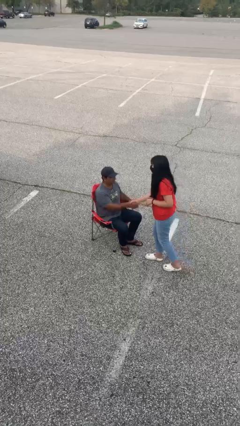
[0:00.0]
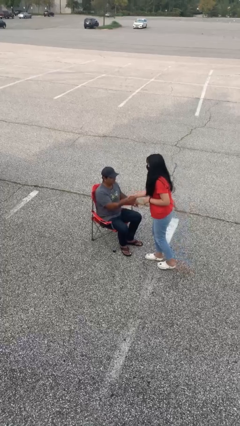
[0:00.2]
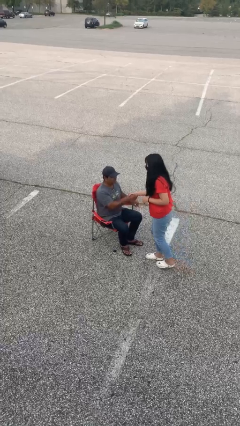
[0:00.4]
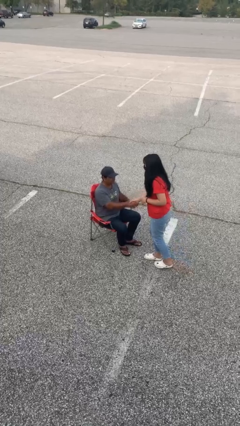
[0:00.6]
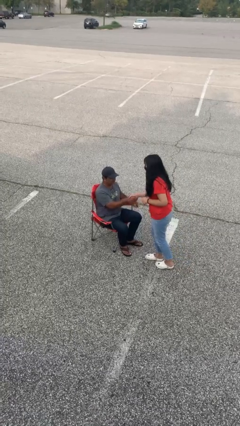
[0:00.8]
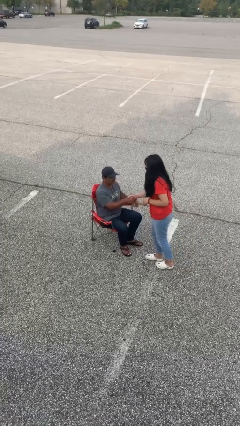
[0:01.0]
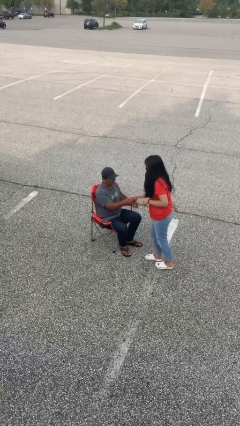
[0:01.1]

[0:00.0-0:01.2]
person shakes hand

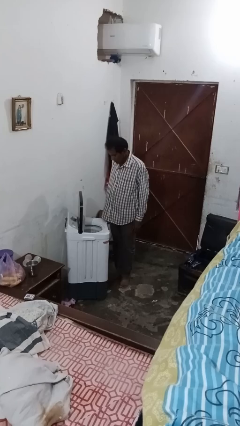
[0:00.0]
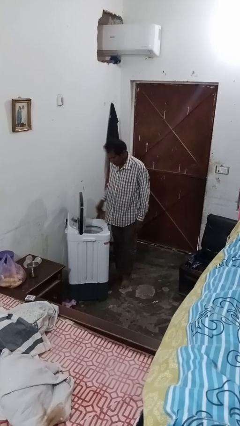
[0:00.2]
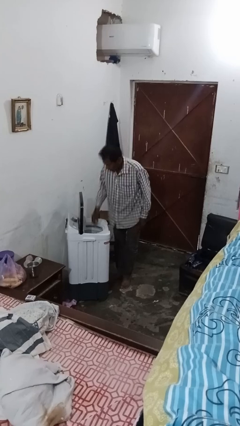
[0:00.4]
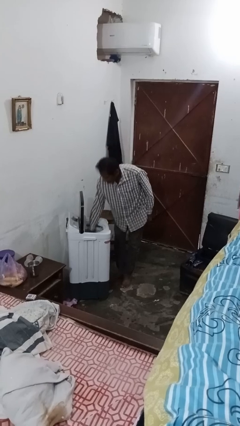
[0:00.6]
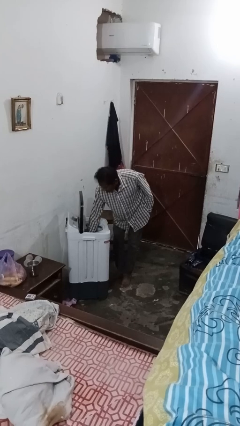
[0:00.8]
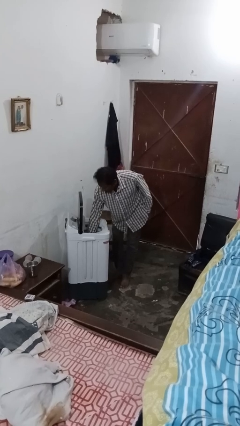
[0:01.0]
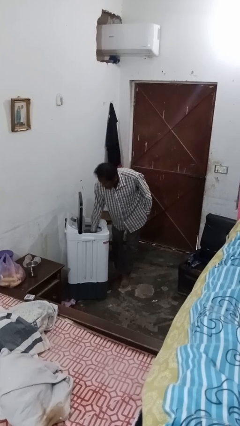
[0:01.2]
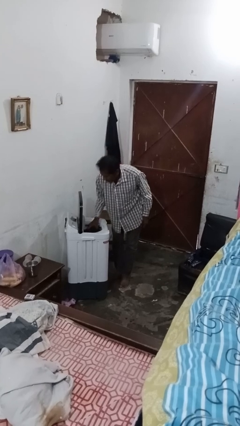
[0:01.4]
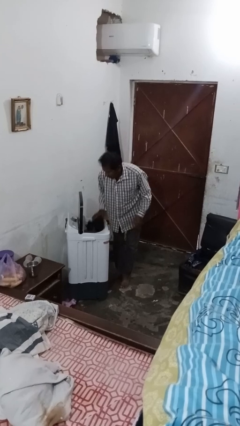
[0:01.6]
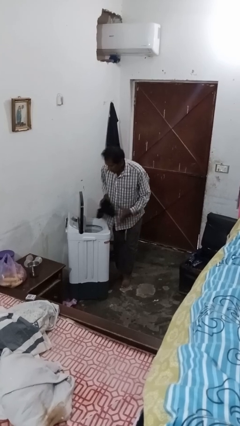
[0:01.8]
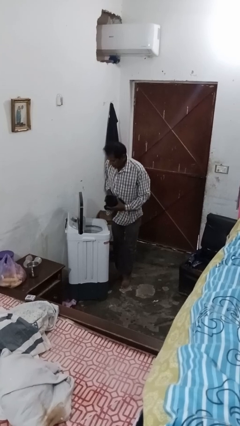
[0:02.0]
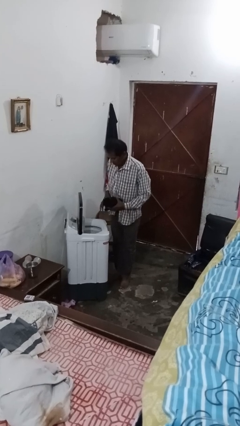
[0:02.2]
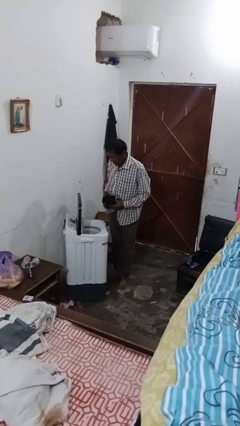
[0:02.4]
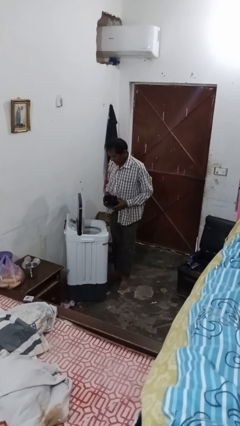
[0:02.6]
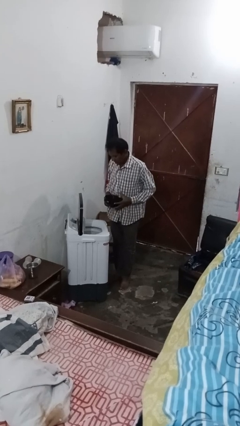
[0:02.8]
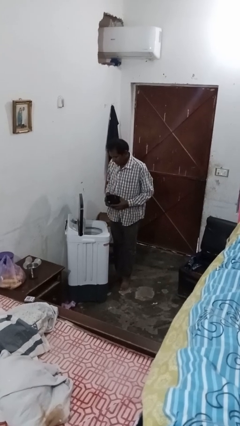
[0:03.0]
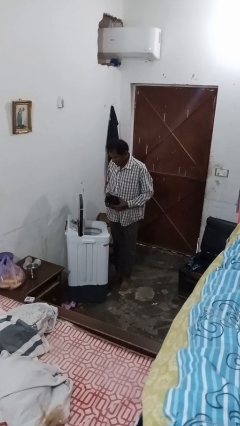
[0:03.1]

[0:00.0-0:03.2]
person unloads clotheswasher

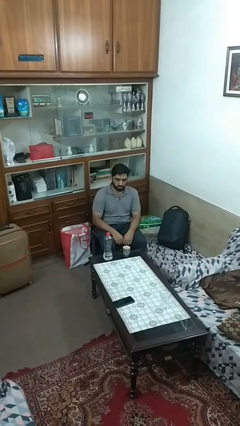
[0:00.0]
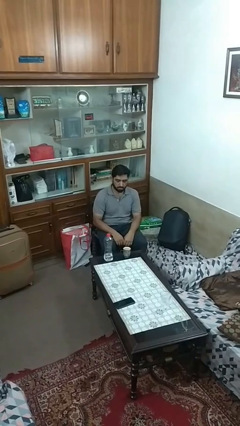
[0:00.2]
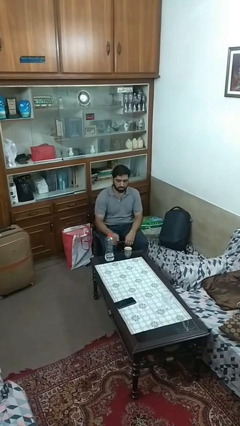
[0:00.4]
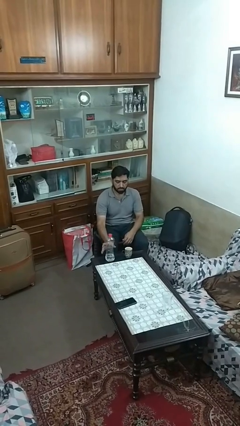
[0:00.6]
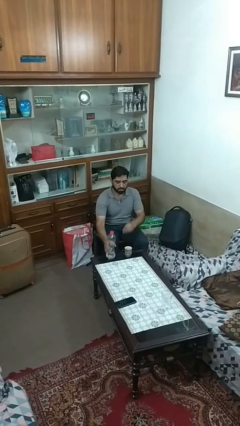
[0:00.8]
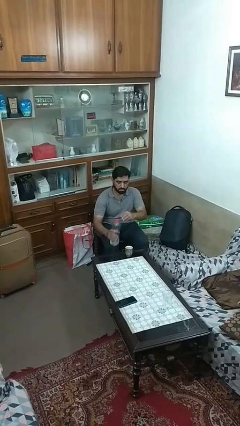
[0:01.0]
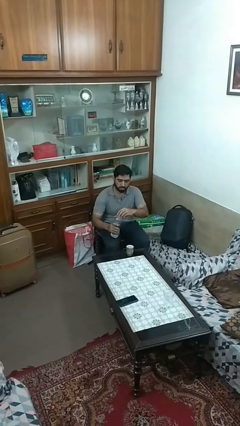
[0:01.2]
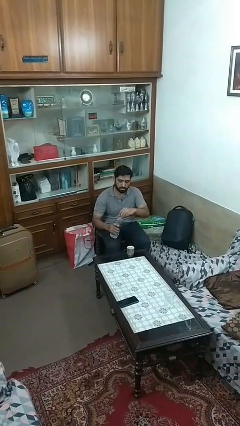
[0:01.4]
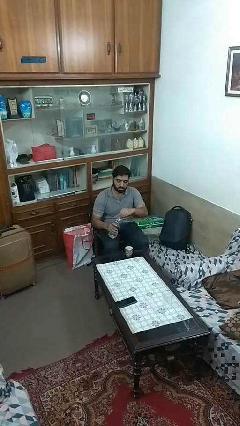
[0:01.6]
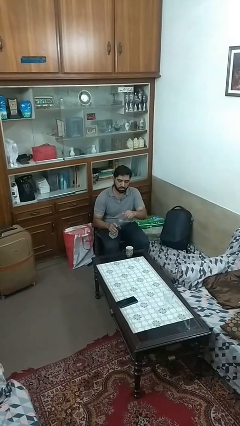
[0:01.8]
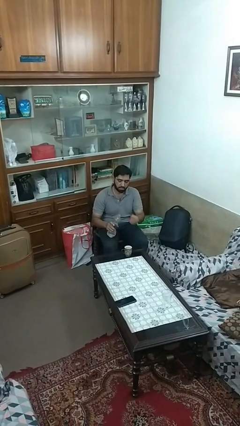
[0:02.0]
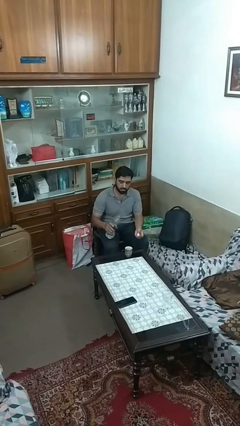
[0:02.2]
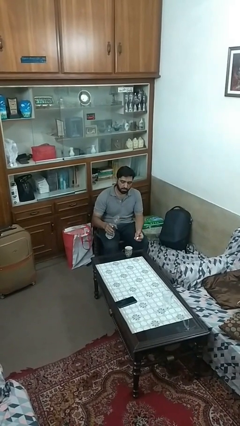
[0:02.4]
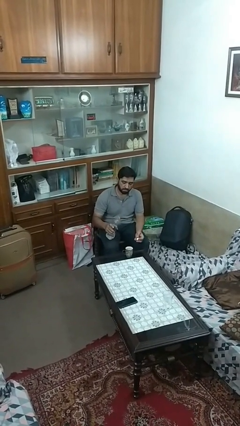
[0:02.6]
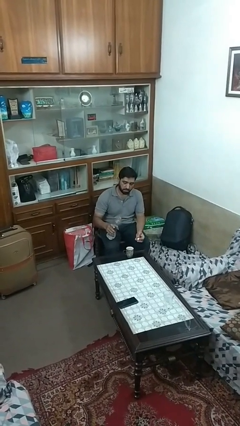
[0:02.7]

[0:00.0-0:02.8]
person unscrews lid from bottle

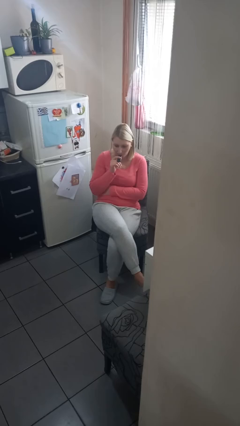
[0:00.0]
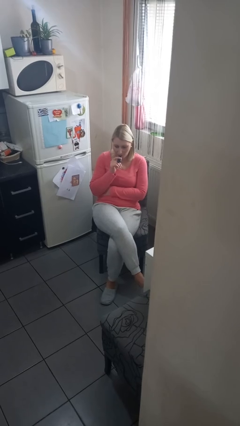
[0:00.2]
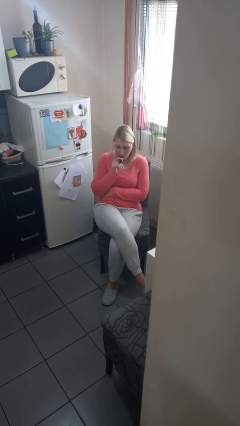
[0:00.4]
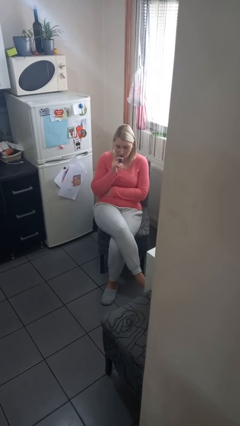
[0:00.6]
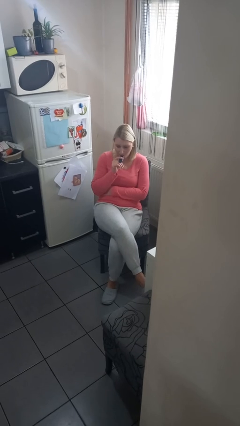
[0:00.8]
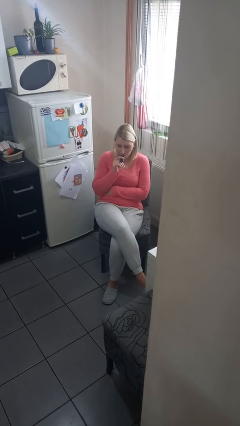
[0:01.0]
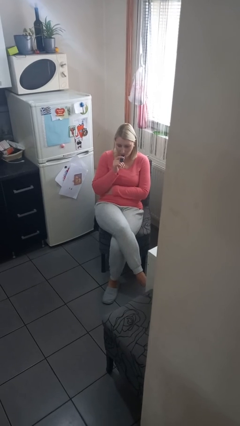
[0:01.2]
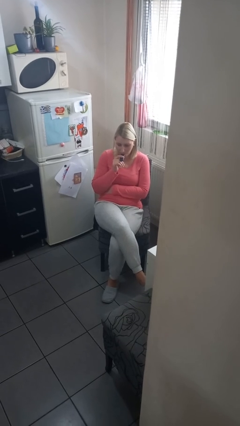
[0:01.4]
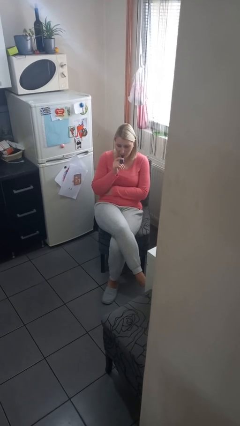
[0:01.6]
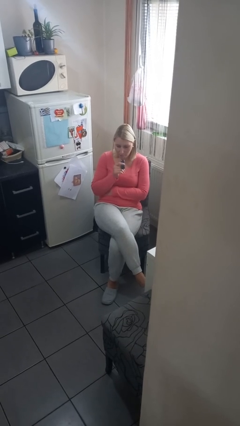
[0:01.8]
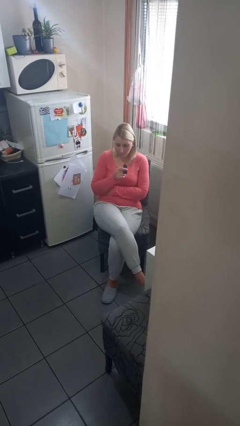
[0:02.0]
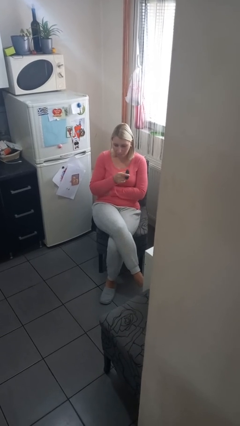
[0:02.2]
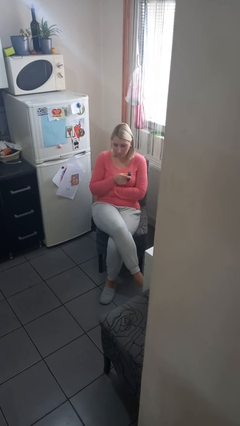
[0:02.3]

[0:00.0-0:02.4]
person vapes

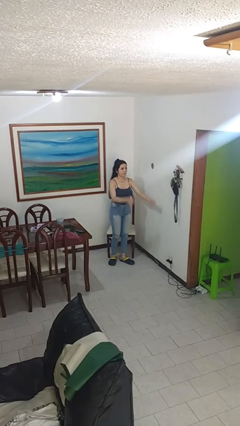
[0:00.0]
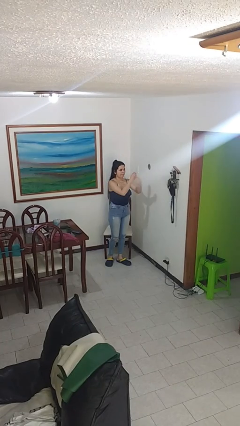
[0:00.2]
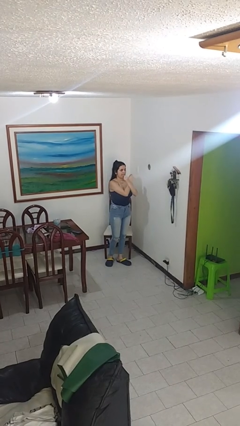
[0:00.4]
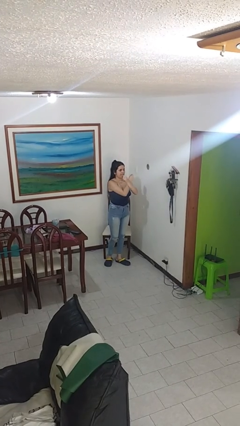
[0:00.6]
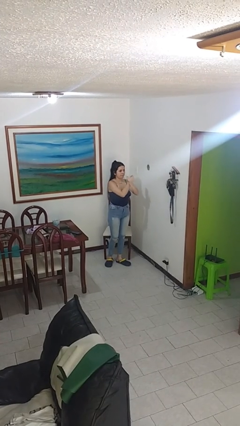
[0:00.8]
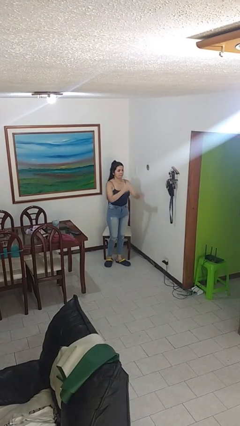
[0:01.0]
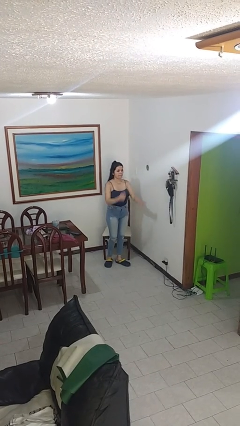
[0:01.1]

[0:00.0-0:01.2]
person gestures arms x

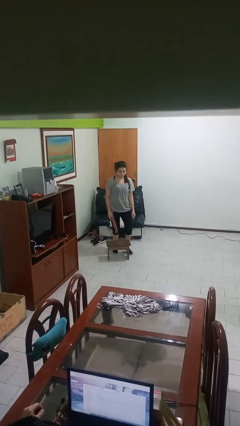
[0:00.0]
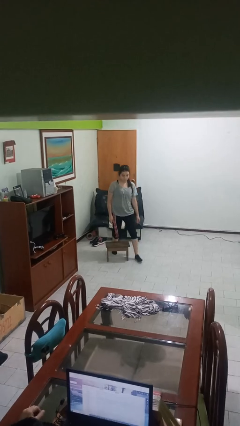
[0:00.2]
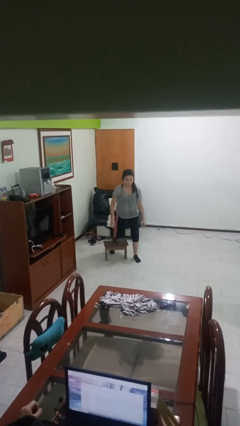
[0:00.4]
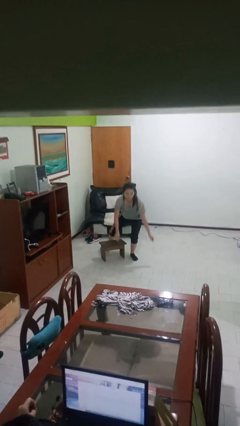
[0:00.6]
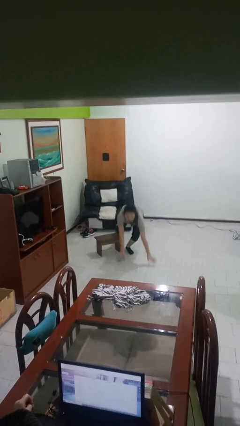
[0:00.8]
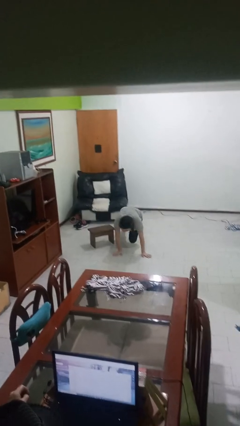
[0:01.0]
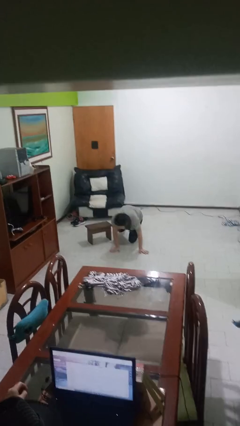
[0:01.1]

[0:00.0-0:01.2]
person trips on object on floor

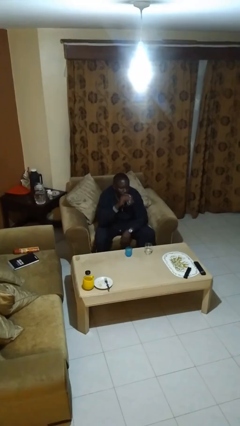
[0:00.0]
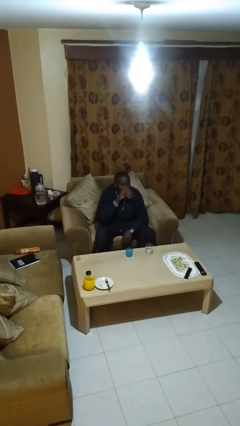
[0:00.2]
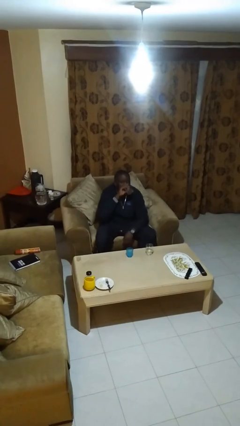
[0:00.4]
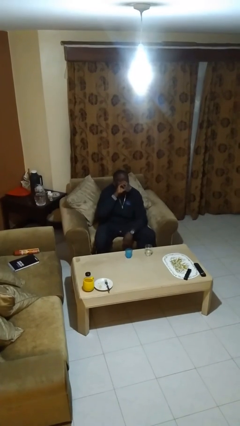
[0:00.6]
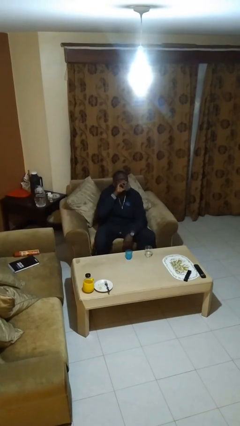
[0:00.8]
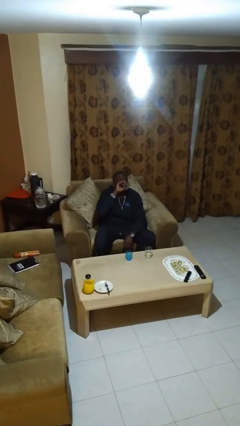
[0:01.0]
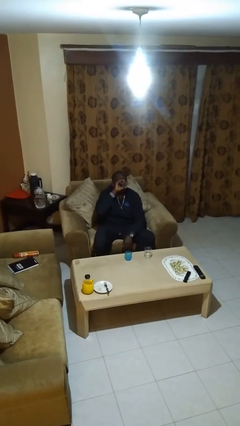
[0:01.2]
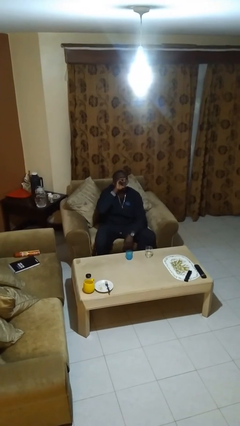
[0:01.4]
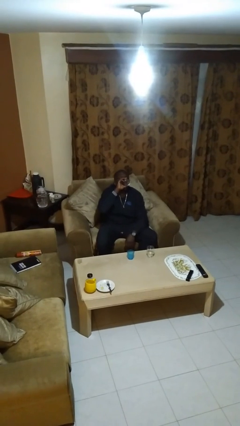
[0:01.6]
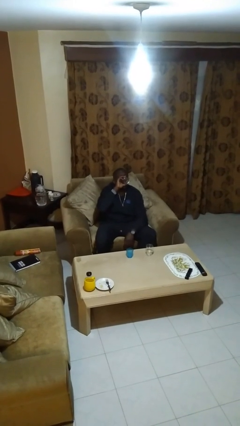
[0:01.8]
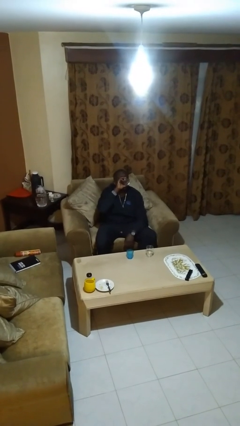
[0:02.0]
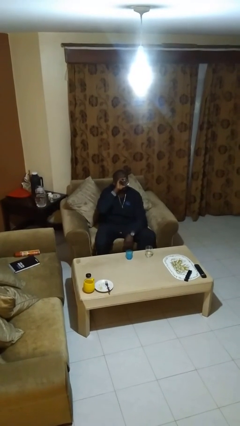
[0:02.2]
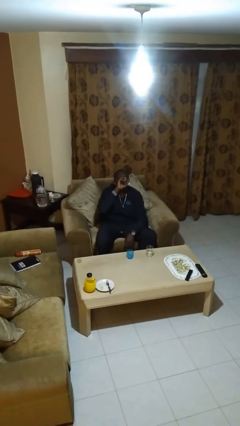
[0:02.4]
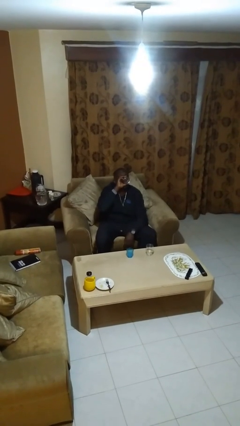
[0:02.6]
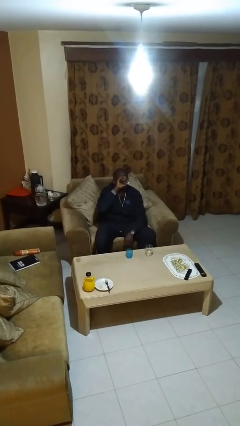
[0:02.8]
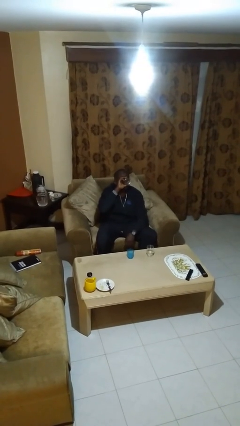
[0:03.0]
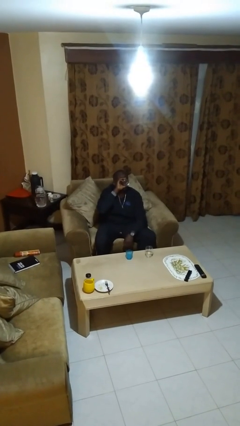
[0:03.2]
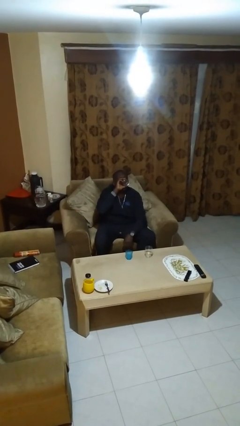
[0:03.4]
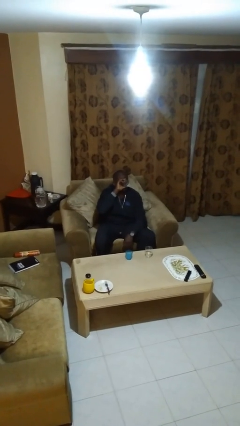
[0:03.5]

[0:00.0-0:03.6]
person drinks from shotglass

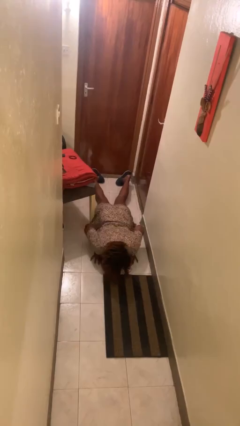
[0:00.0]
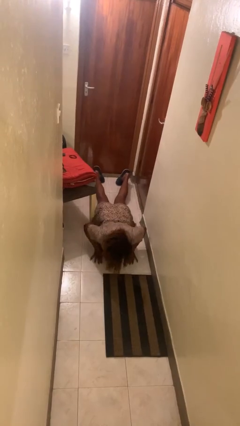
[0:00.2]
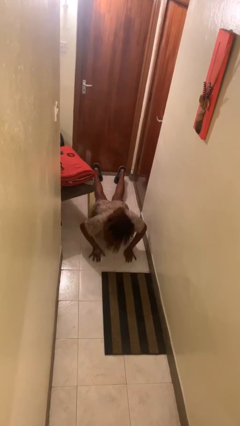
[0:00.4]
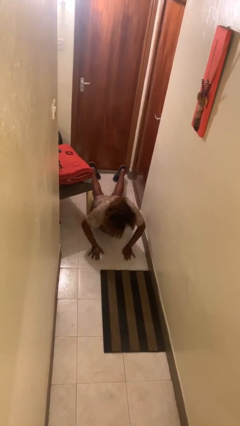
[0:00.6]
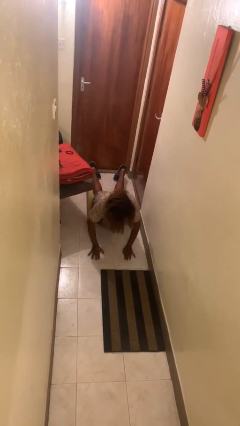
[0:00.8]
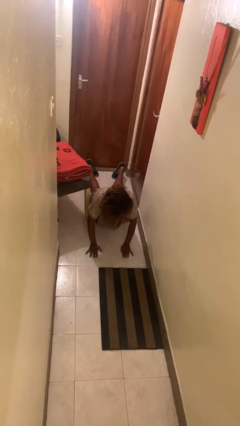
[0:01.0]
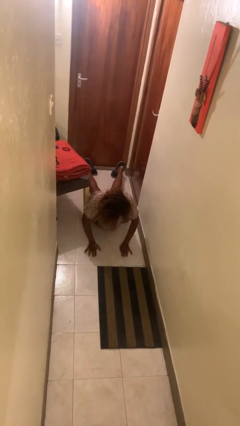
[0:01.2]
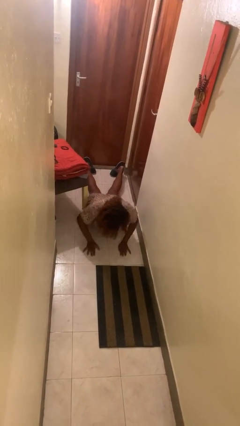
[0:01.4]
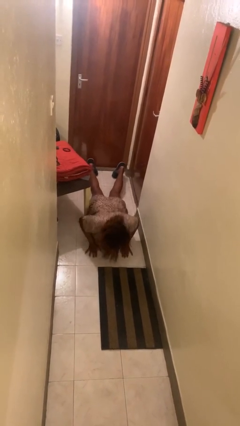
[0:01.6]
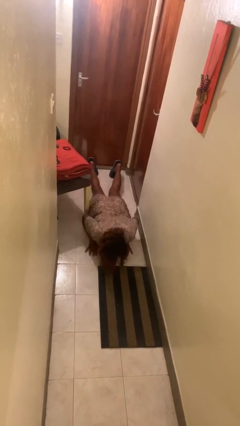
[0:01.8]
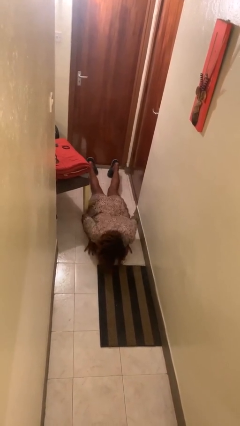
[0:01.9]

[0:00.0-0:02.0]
person exercises with pushup
